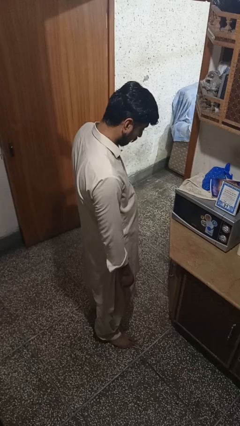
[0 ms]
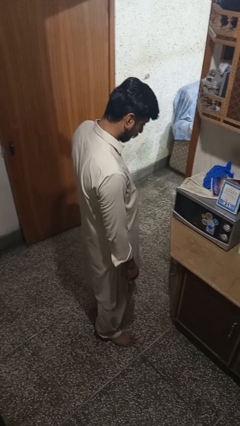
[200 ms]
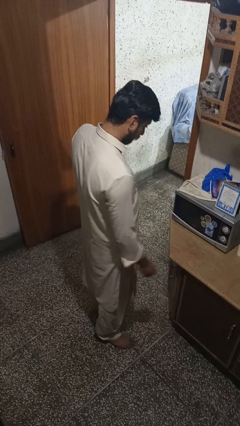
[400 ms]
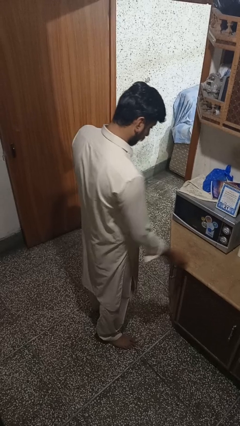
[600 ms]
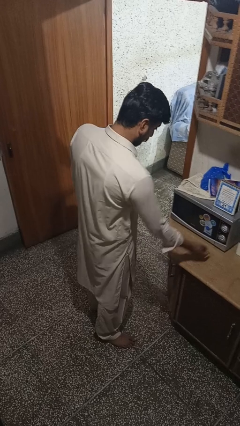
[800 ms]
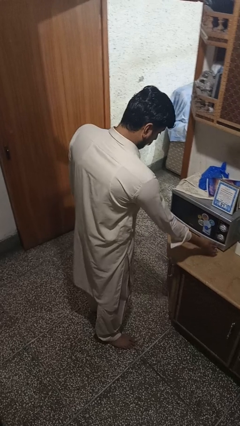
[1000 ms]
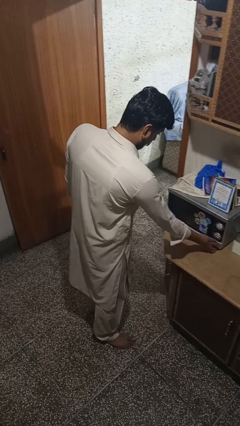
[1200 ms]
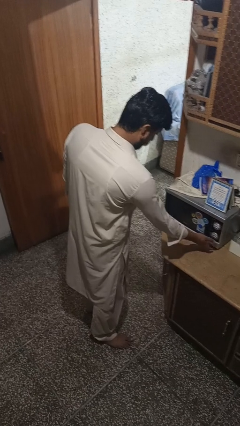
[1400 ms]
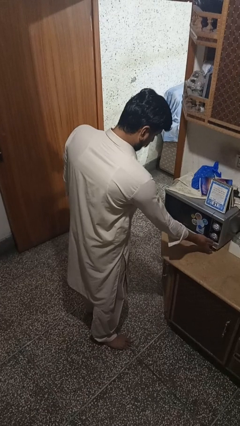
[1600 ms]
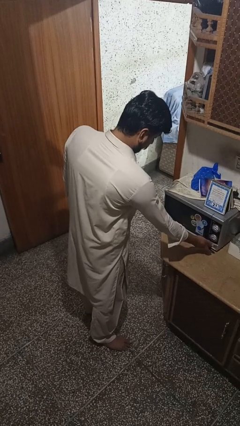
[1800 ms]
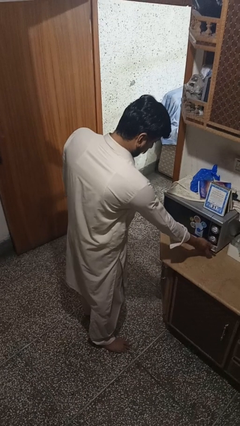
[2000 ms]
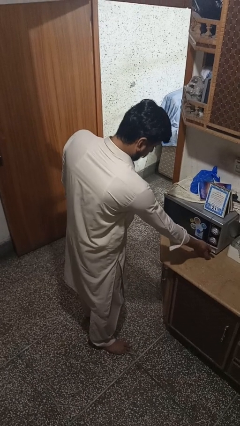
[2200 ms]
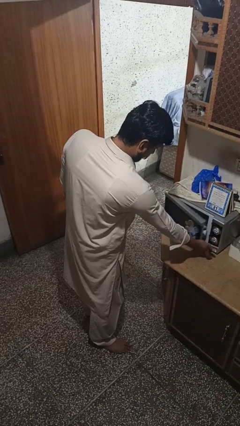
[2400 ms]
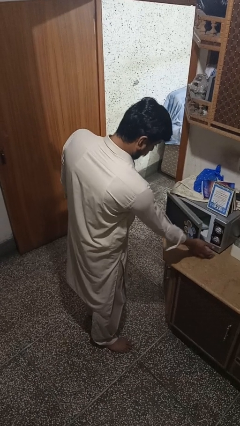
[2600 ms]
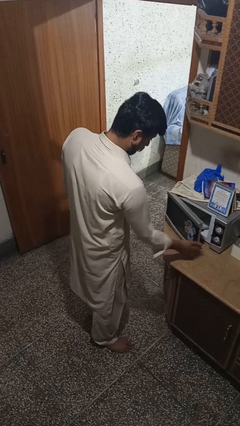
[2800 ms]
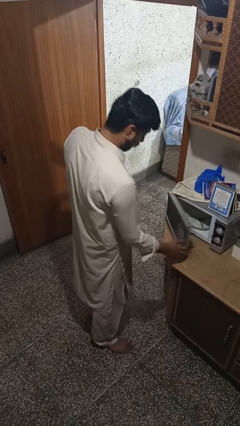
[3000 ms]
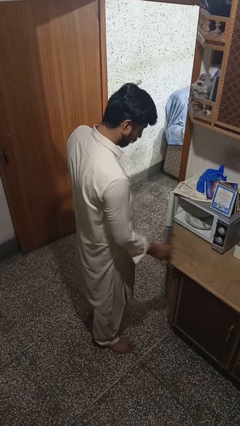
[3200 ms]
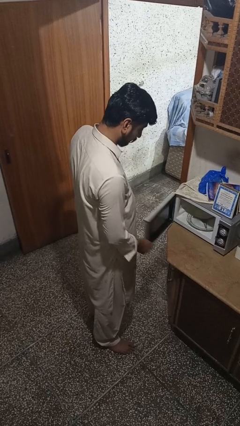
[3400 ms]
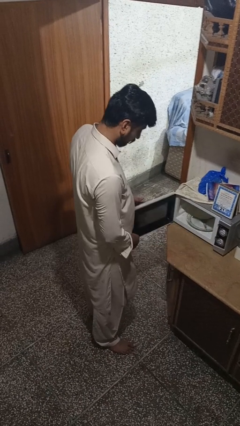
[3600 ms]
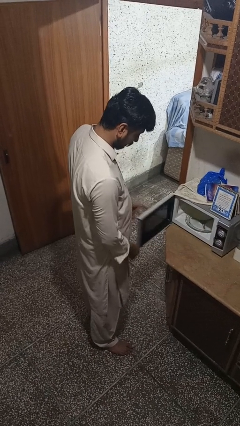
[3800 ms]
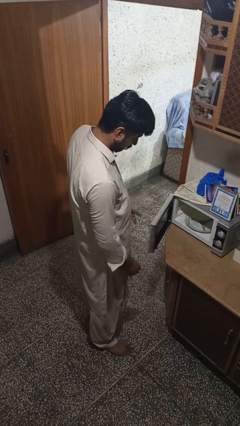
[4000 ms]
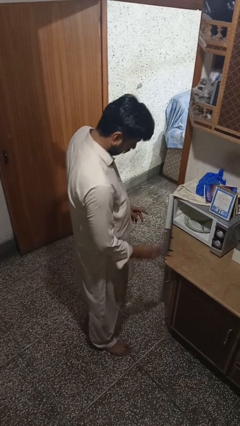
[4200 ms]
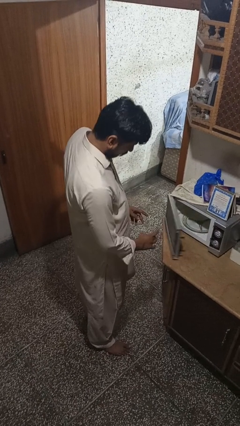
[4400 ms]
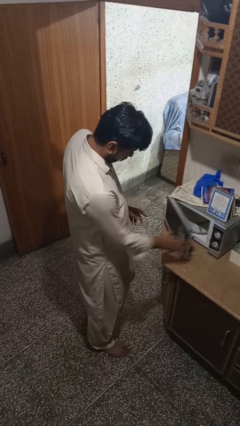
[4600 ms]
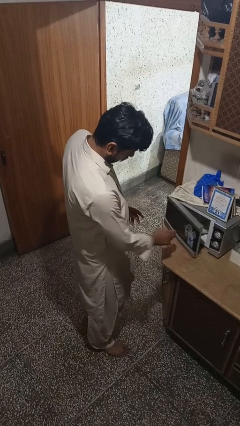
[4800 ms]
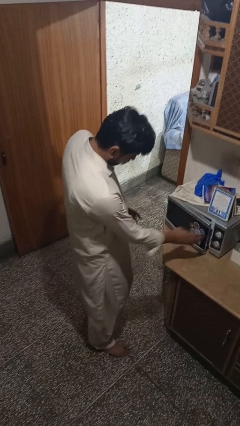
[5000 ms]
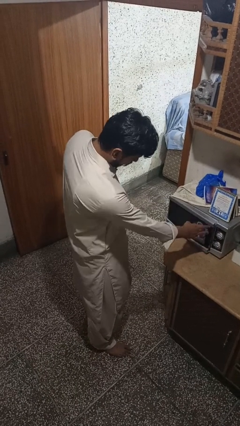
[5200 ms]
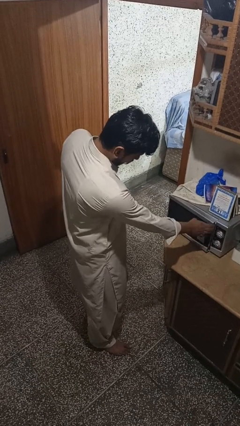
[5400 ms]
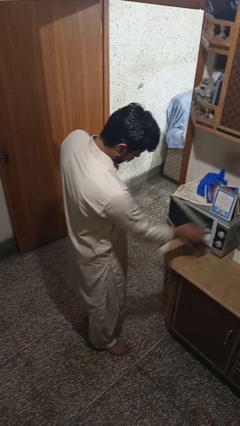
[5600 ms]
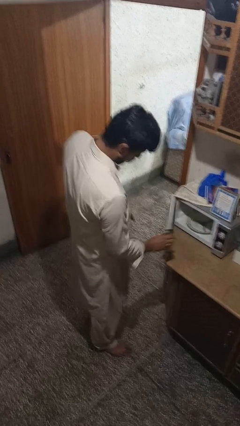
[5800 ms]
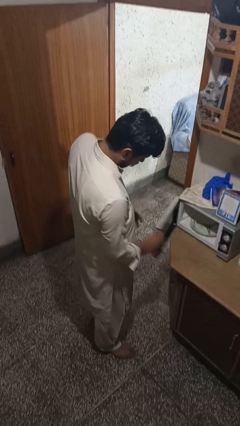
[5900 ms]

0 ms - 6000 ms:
person opens oven door

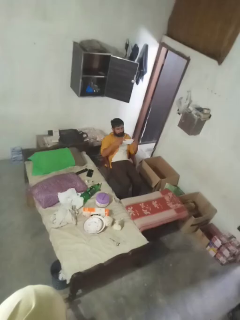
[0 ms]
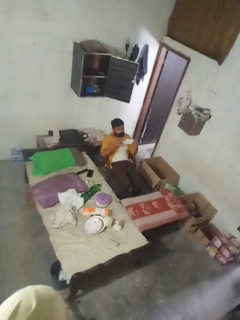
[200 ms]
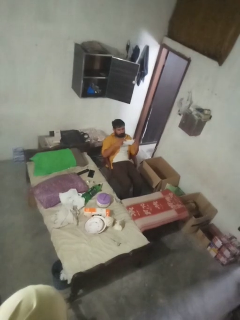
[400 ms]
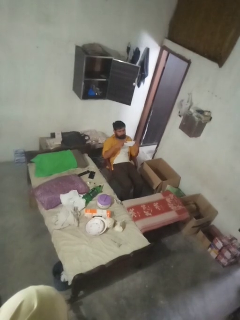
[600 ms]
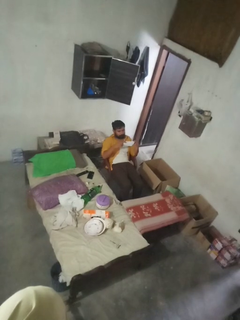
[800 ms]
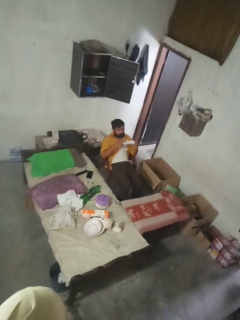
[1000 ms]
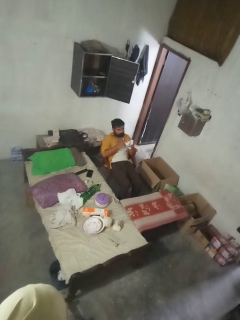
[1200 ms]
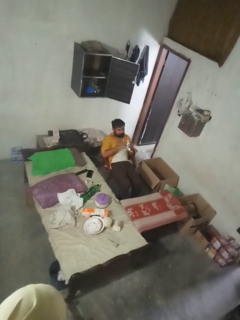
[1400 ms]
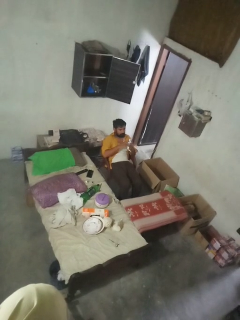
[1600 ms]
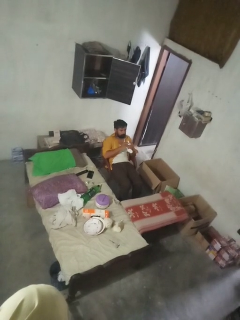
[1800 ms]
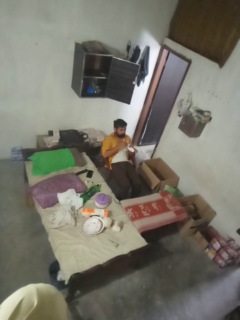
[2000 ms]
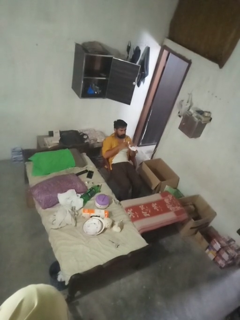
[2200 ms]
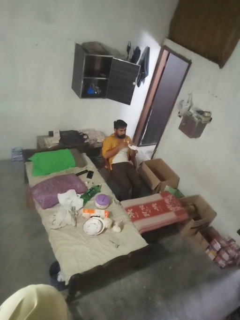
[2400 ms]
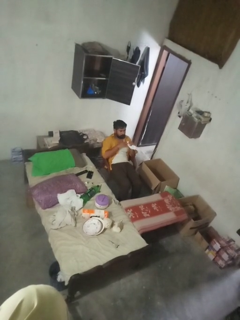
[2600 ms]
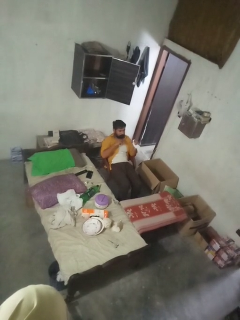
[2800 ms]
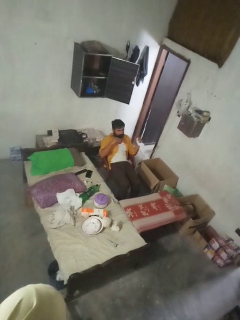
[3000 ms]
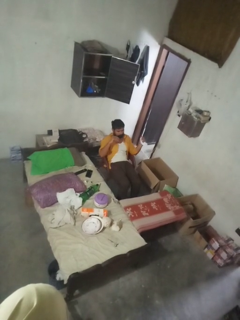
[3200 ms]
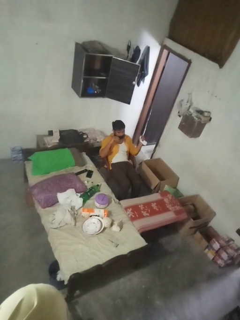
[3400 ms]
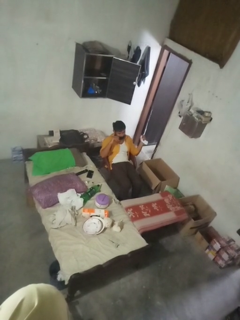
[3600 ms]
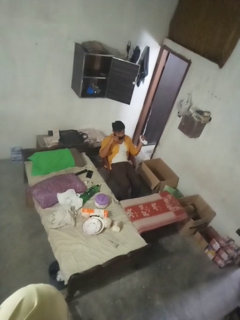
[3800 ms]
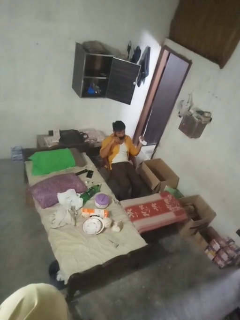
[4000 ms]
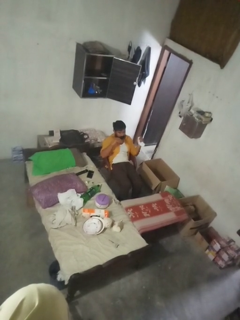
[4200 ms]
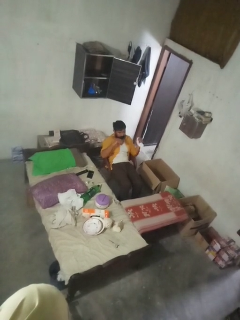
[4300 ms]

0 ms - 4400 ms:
person crumples paper

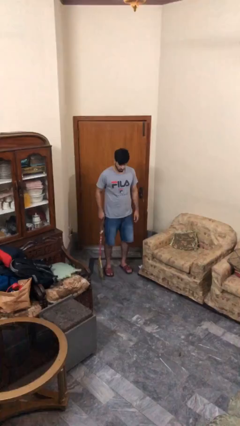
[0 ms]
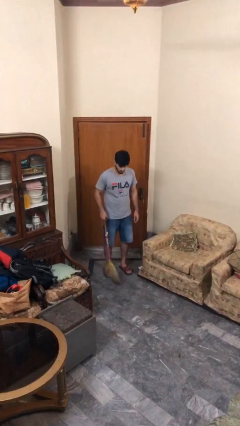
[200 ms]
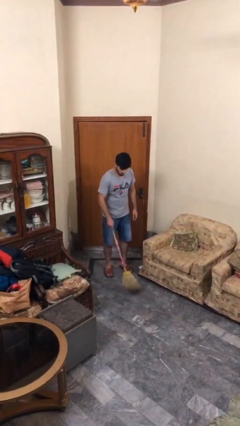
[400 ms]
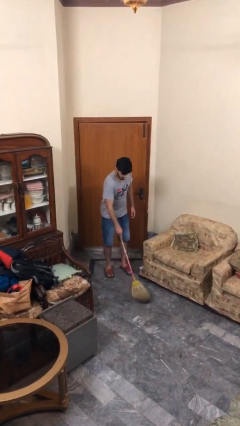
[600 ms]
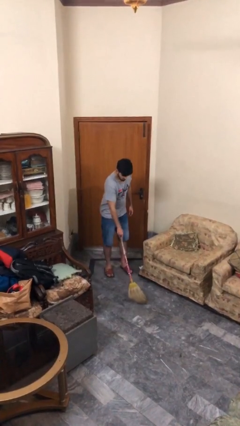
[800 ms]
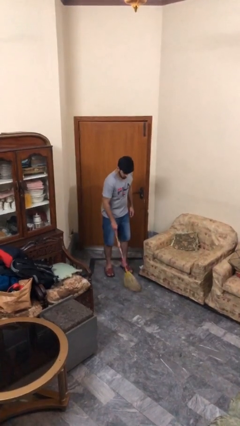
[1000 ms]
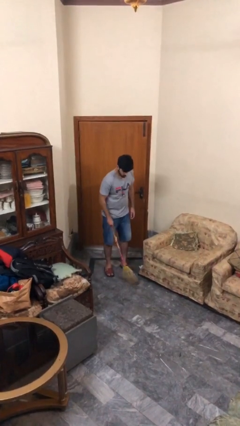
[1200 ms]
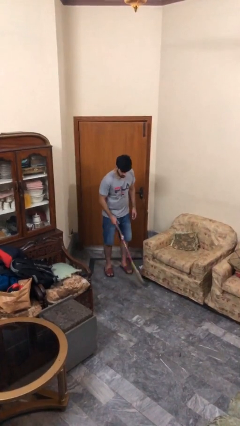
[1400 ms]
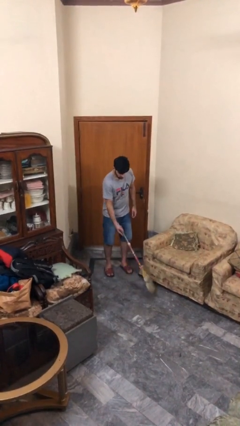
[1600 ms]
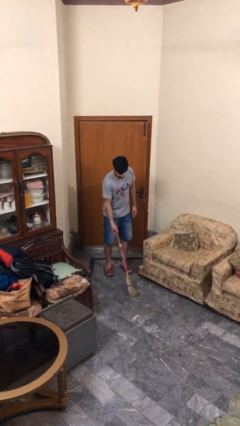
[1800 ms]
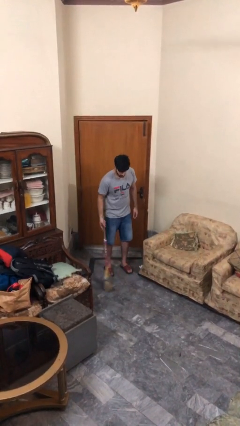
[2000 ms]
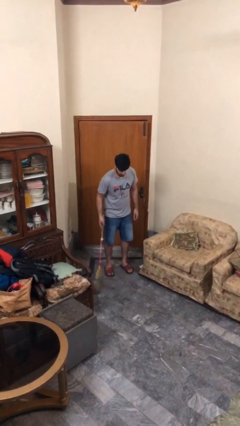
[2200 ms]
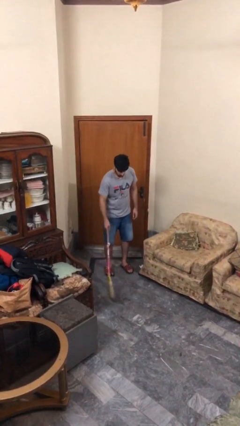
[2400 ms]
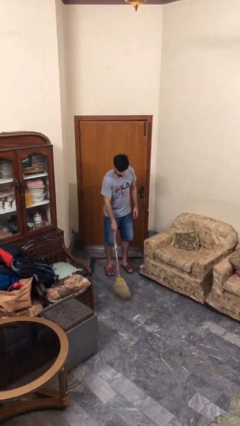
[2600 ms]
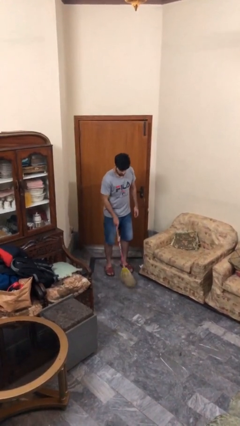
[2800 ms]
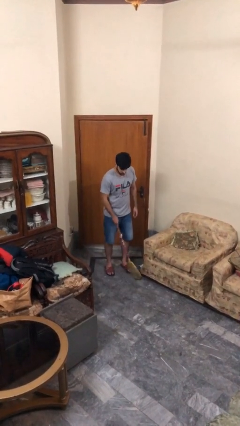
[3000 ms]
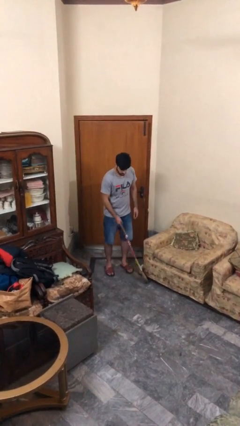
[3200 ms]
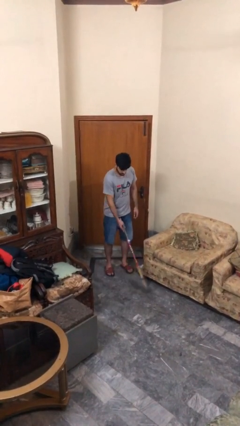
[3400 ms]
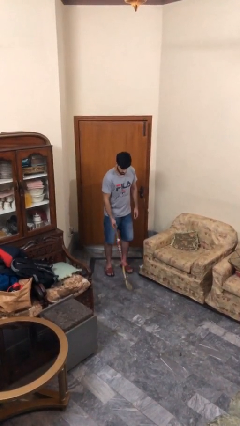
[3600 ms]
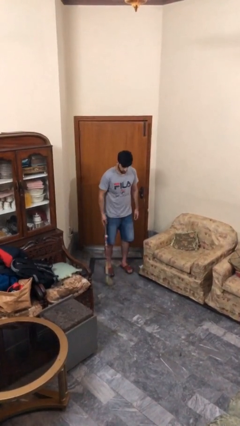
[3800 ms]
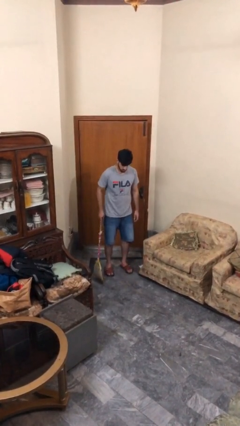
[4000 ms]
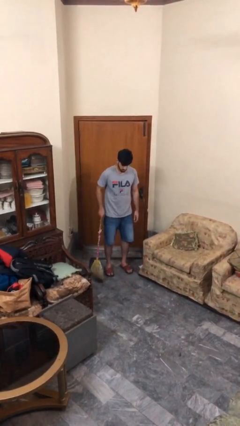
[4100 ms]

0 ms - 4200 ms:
person sweeps floor

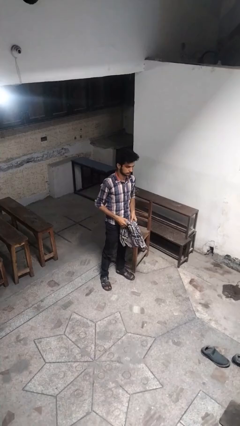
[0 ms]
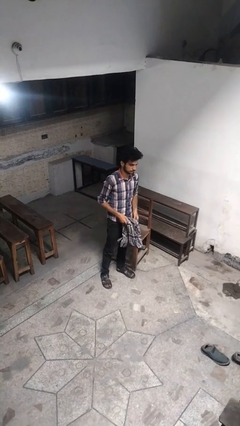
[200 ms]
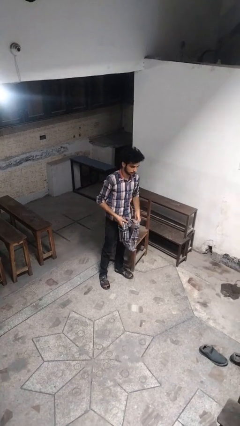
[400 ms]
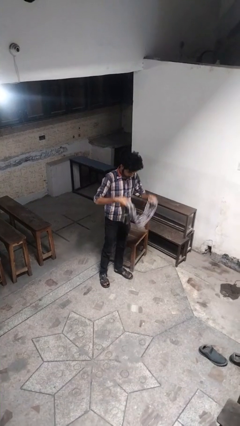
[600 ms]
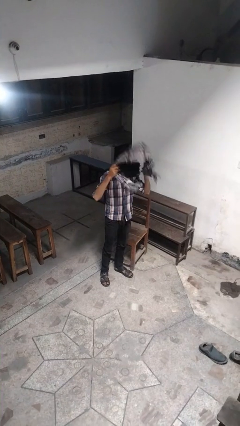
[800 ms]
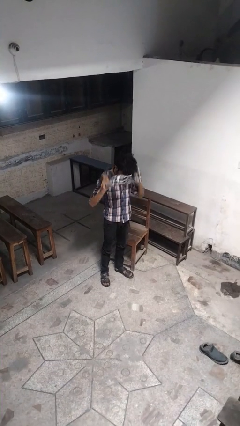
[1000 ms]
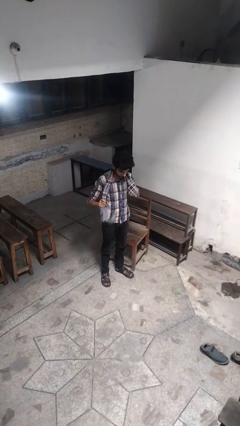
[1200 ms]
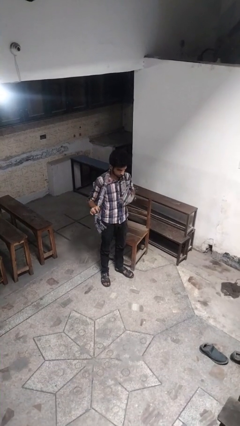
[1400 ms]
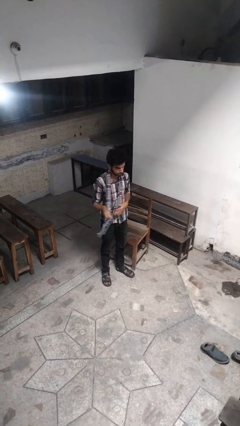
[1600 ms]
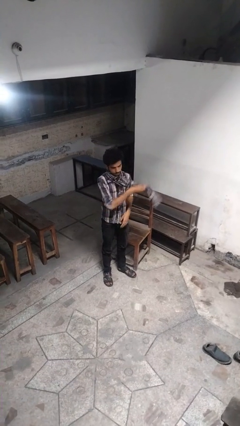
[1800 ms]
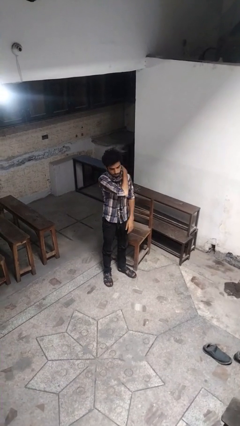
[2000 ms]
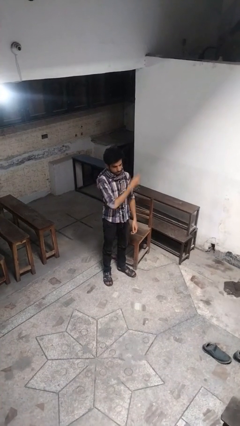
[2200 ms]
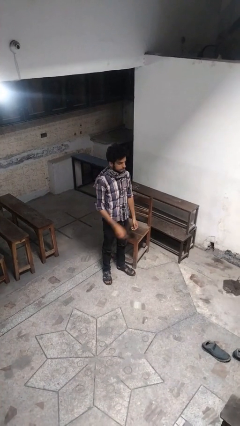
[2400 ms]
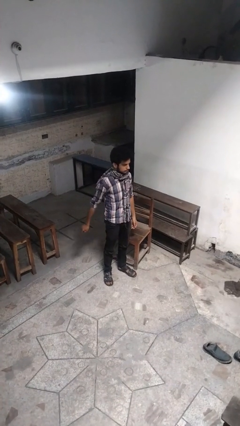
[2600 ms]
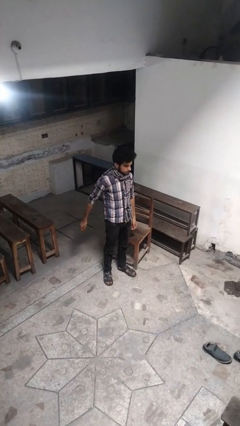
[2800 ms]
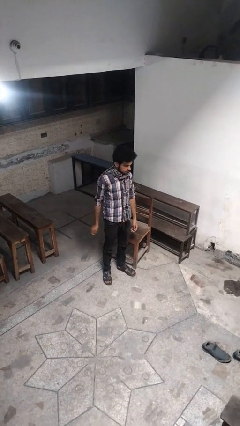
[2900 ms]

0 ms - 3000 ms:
person puts on scarf

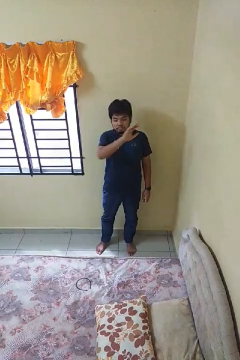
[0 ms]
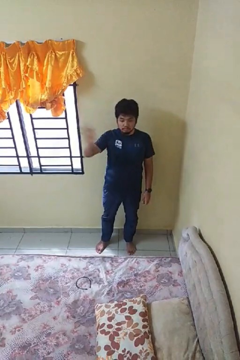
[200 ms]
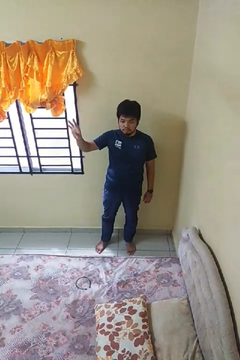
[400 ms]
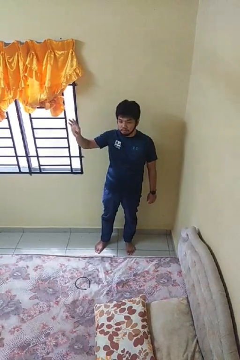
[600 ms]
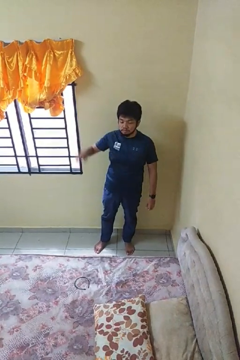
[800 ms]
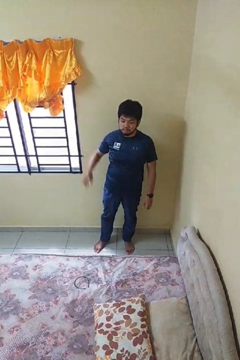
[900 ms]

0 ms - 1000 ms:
person gestures swipe right
